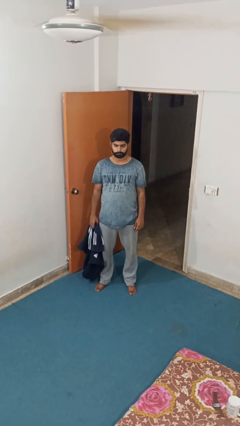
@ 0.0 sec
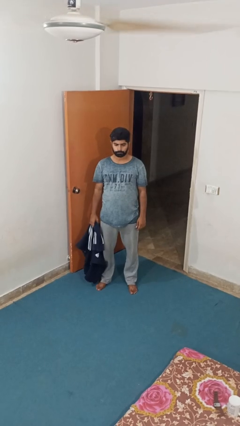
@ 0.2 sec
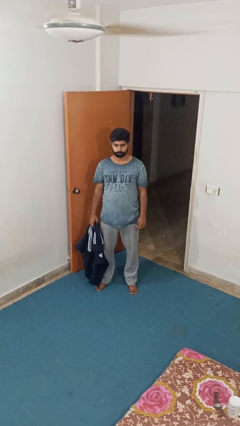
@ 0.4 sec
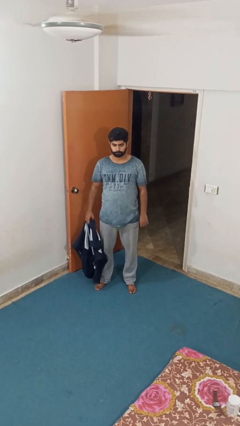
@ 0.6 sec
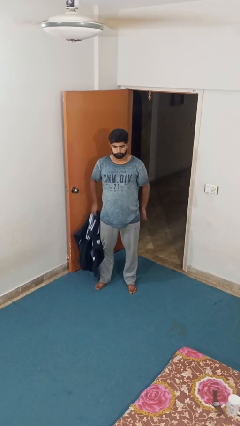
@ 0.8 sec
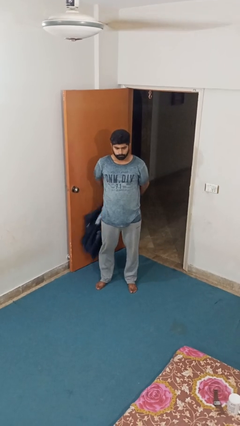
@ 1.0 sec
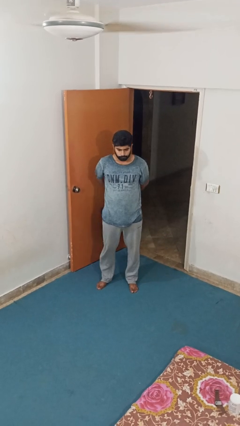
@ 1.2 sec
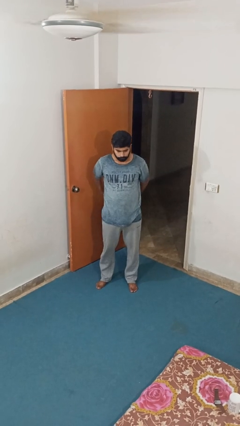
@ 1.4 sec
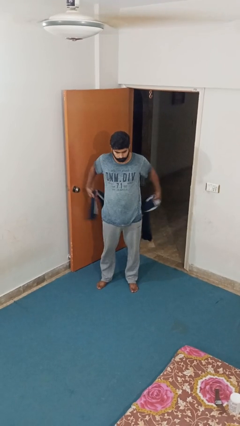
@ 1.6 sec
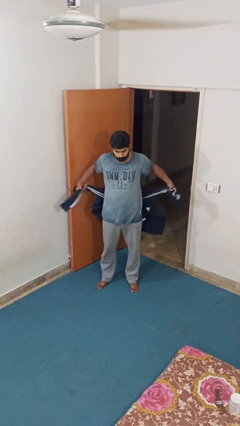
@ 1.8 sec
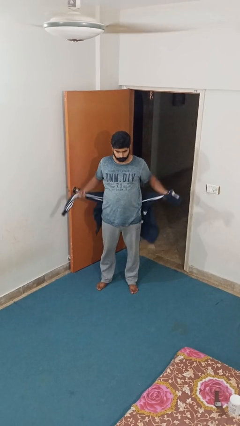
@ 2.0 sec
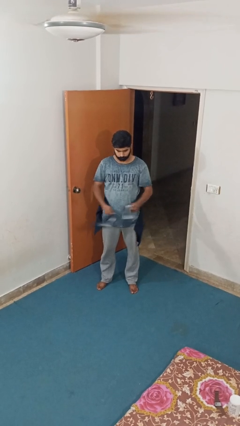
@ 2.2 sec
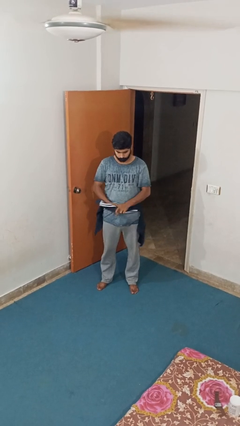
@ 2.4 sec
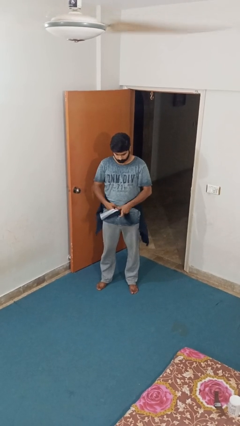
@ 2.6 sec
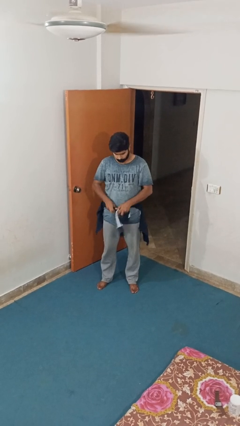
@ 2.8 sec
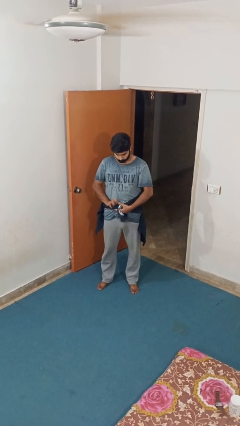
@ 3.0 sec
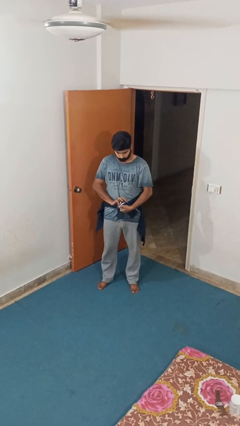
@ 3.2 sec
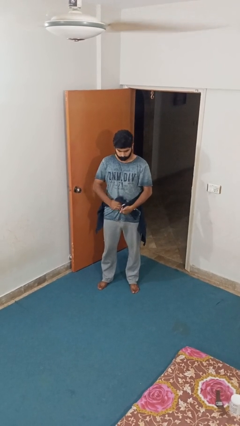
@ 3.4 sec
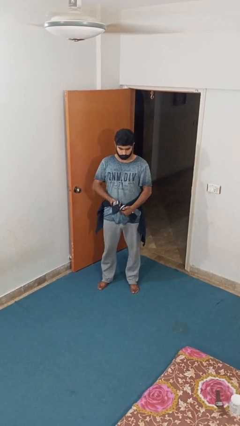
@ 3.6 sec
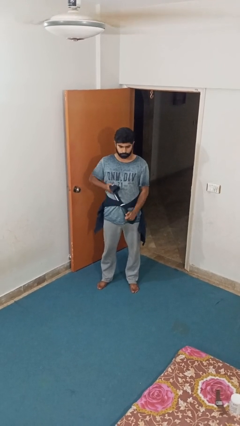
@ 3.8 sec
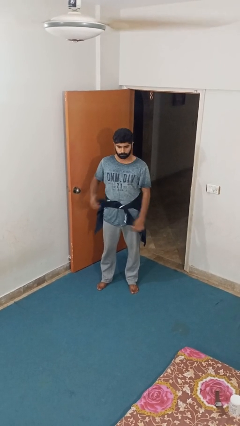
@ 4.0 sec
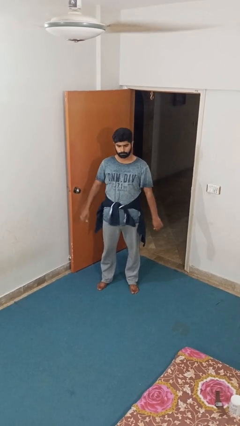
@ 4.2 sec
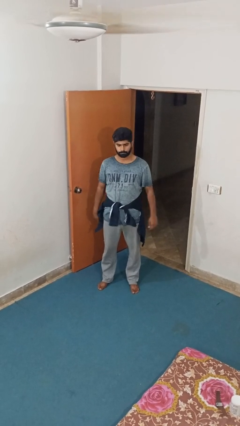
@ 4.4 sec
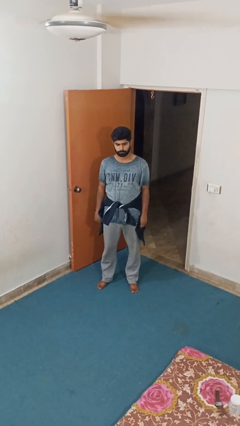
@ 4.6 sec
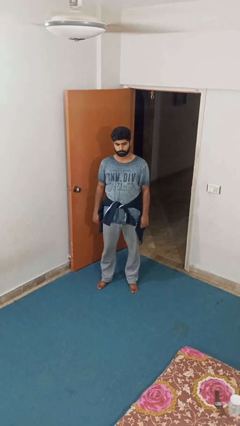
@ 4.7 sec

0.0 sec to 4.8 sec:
person ties jacket around waist

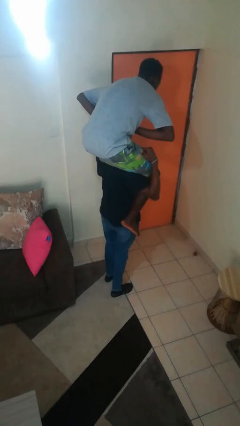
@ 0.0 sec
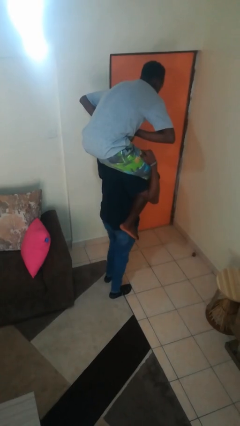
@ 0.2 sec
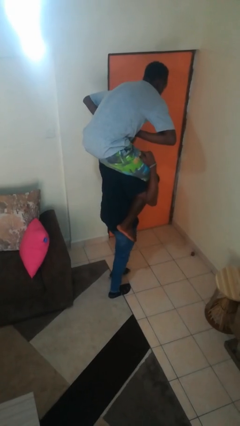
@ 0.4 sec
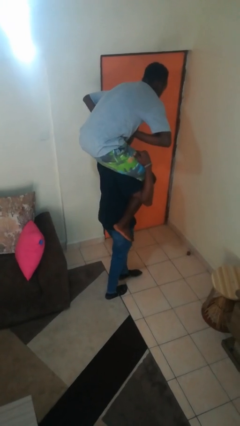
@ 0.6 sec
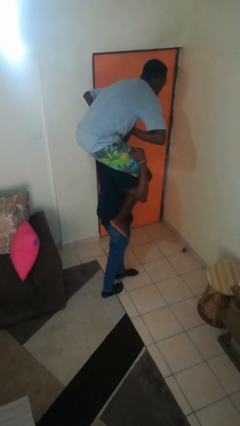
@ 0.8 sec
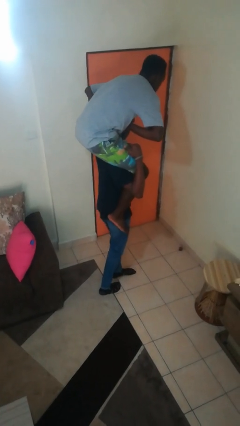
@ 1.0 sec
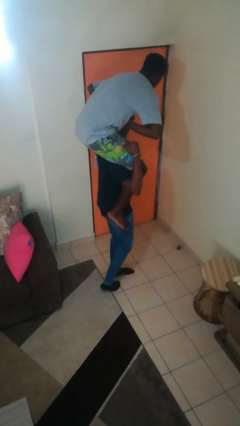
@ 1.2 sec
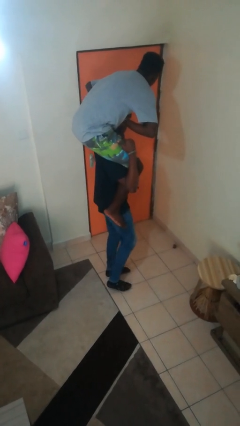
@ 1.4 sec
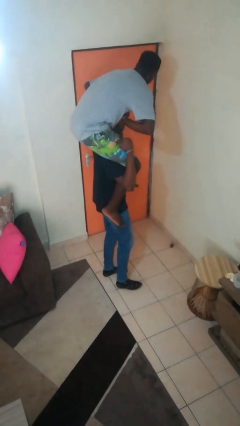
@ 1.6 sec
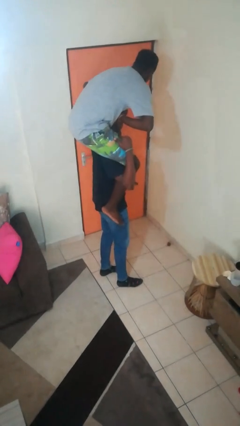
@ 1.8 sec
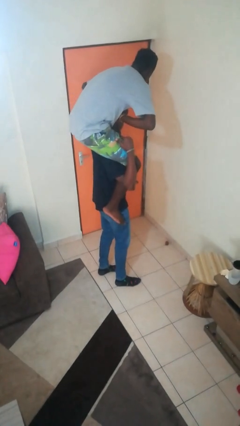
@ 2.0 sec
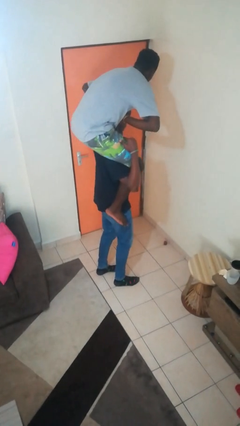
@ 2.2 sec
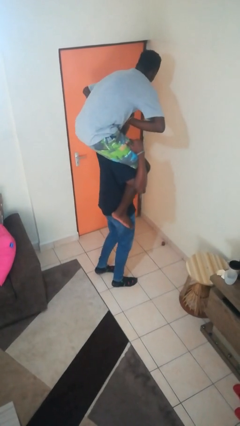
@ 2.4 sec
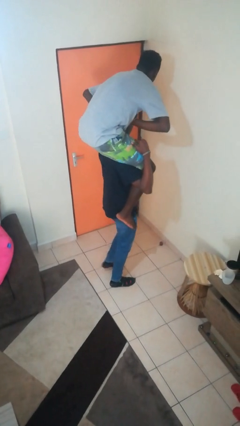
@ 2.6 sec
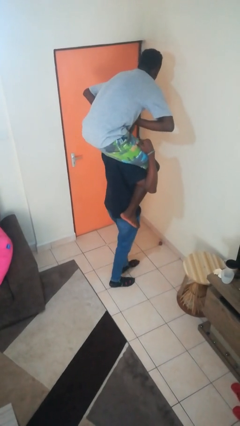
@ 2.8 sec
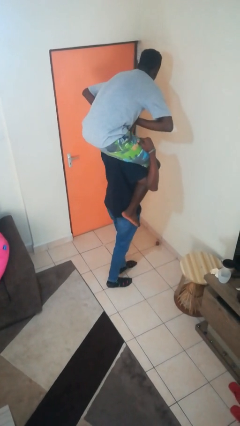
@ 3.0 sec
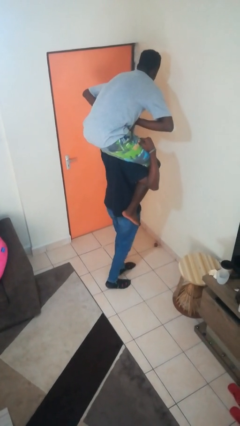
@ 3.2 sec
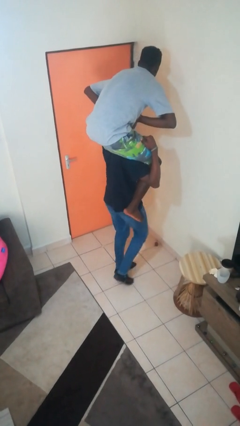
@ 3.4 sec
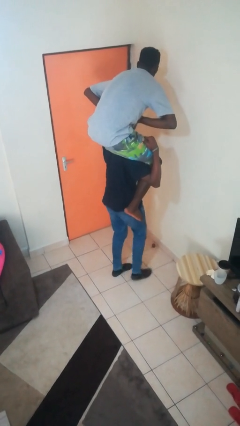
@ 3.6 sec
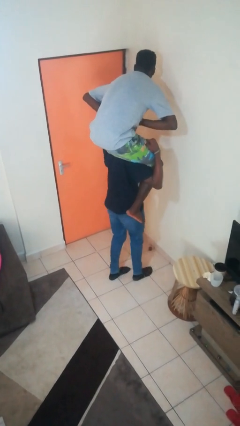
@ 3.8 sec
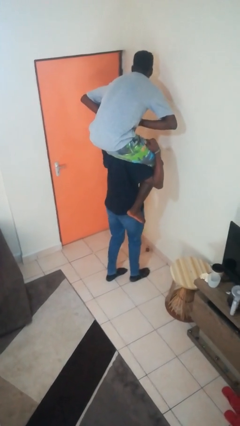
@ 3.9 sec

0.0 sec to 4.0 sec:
person carries person on shoulders

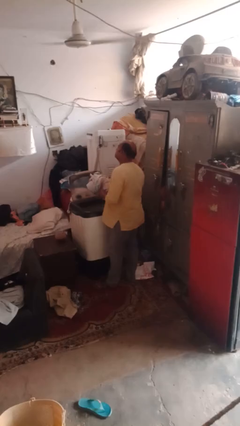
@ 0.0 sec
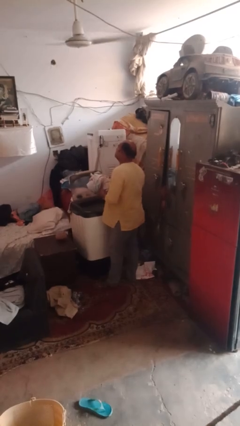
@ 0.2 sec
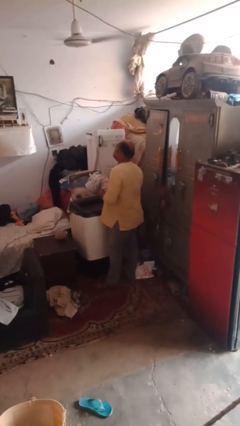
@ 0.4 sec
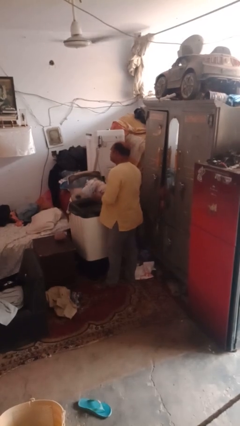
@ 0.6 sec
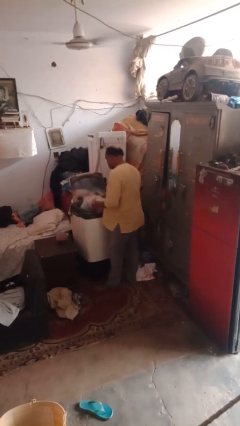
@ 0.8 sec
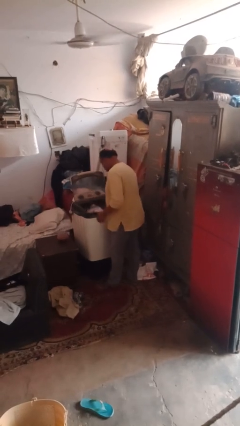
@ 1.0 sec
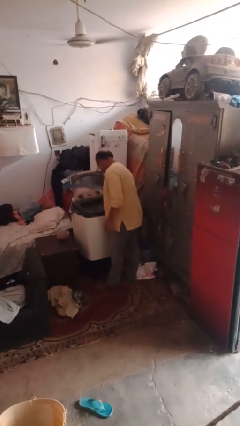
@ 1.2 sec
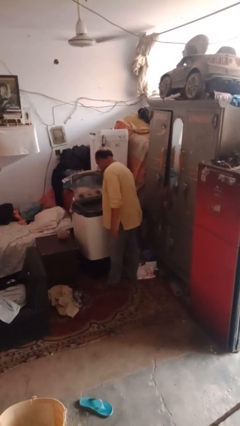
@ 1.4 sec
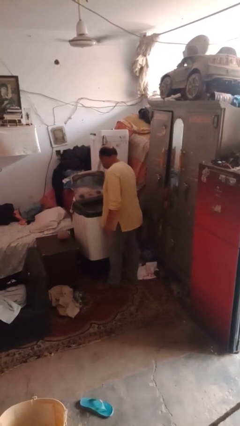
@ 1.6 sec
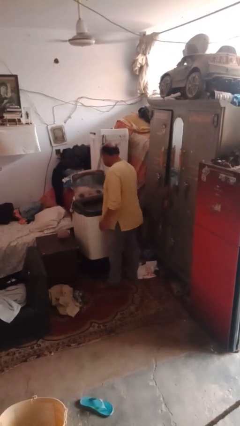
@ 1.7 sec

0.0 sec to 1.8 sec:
person loads clotheswasher

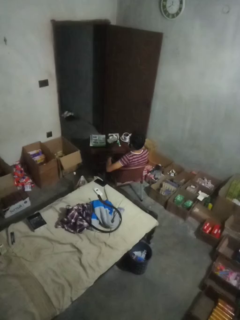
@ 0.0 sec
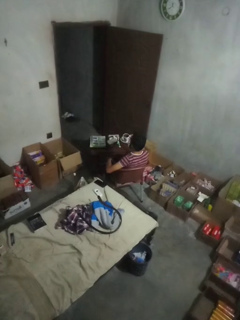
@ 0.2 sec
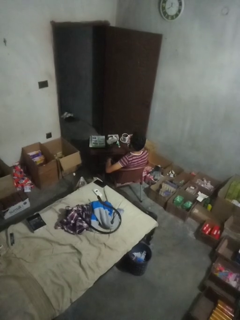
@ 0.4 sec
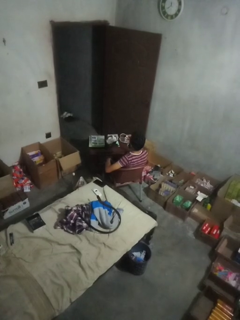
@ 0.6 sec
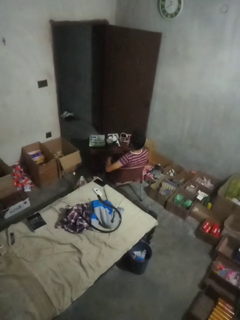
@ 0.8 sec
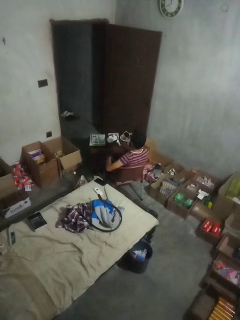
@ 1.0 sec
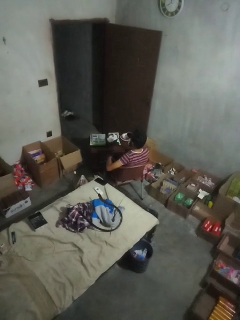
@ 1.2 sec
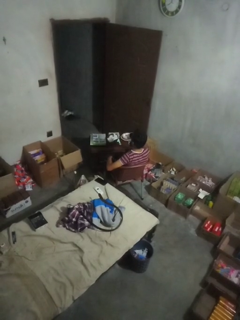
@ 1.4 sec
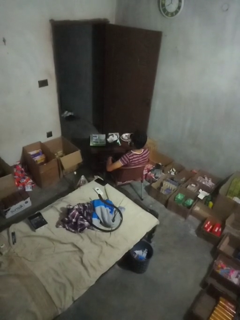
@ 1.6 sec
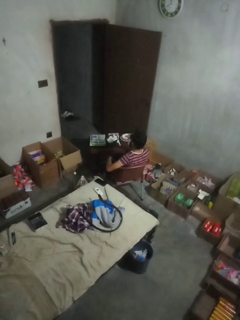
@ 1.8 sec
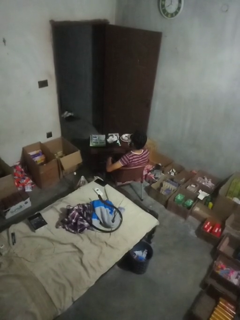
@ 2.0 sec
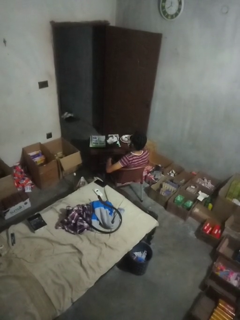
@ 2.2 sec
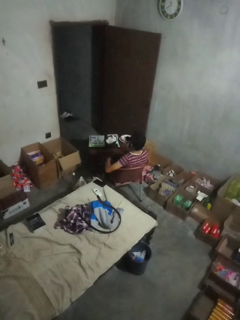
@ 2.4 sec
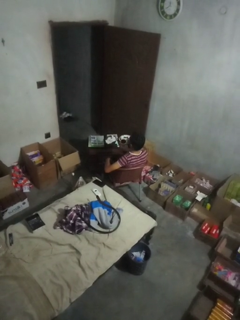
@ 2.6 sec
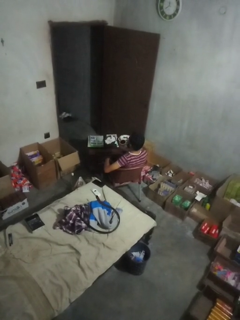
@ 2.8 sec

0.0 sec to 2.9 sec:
person drinks from mug

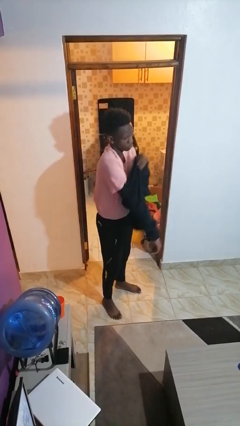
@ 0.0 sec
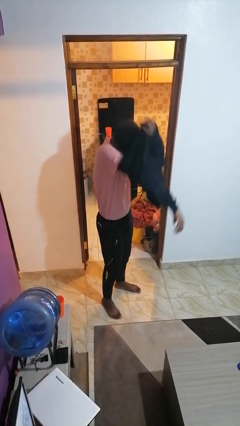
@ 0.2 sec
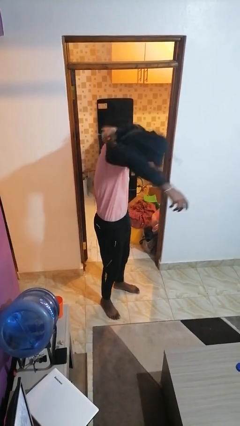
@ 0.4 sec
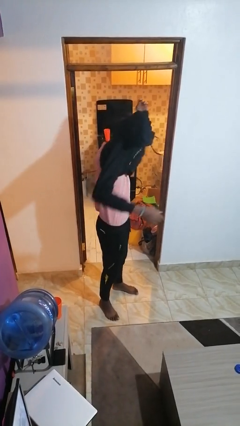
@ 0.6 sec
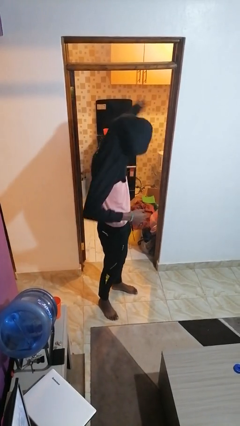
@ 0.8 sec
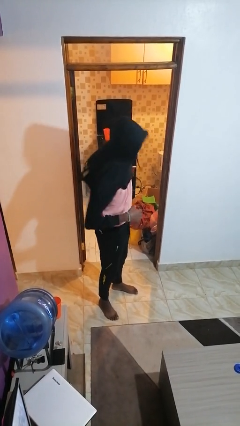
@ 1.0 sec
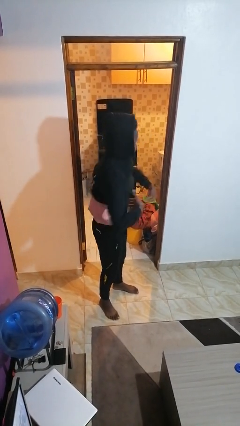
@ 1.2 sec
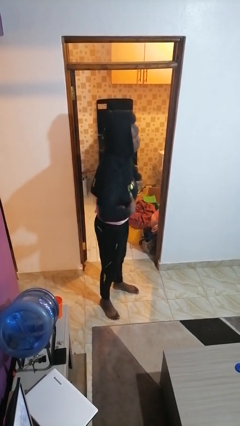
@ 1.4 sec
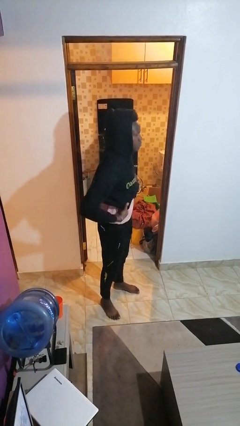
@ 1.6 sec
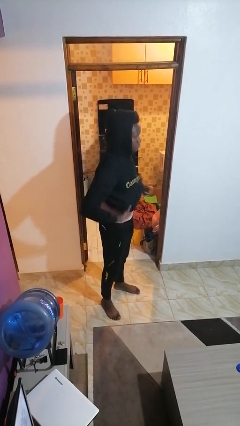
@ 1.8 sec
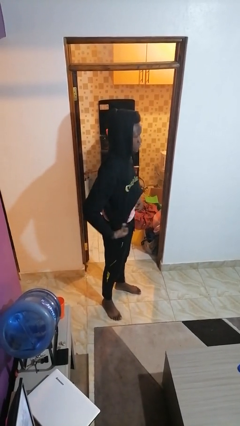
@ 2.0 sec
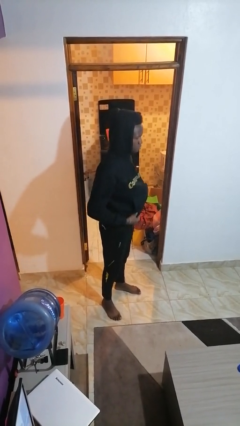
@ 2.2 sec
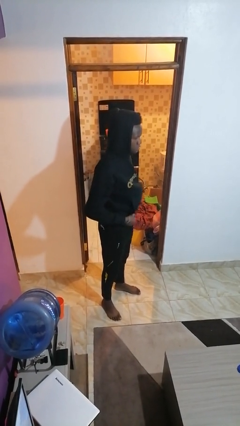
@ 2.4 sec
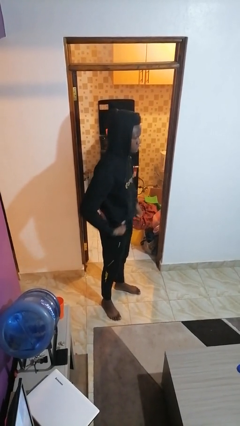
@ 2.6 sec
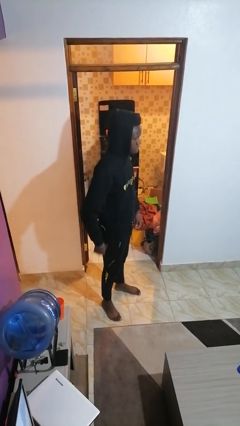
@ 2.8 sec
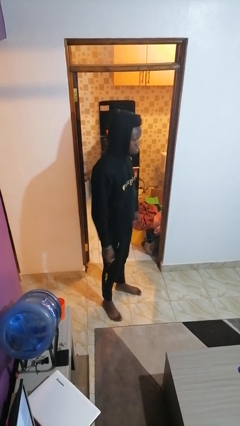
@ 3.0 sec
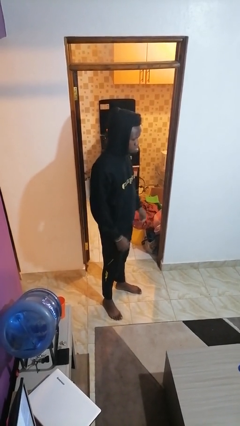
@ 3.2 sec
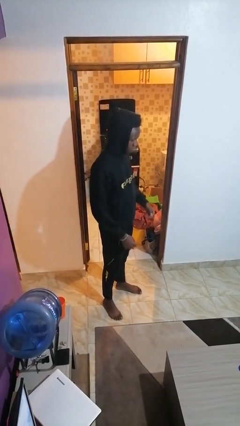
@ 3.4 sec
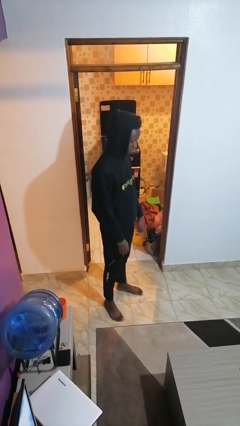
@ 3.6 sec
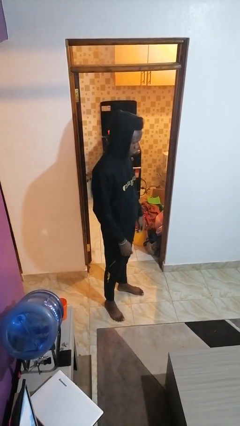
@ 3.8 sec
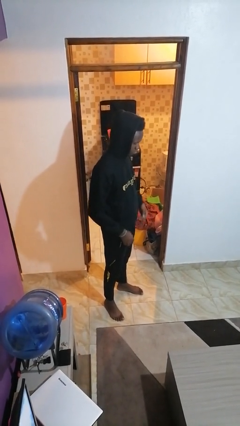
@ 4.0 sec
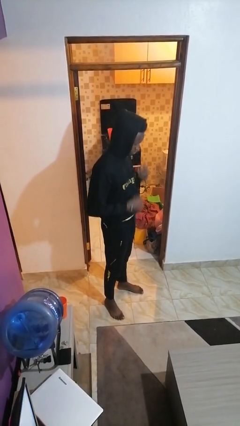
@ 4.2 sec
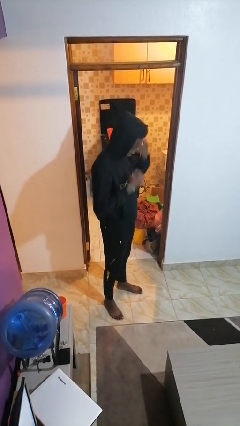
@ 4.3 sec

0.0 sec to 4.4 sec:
person puts on hoodie

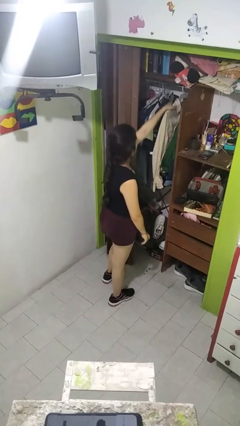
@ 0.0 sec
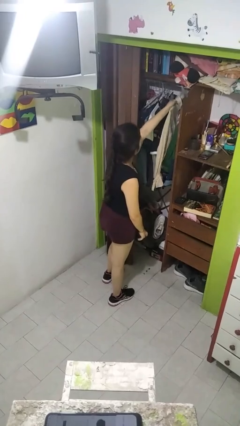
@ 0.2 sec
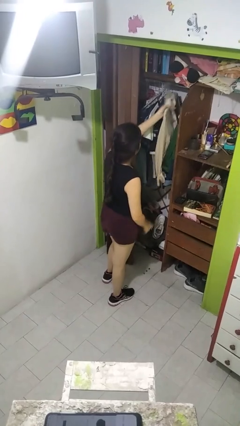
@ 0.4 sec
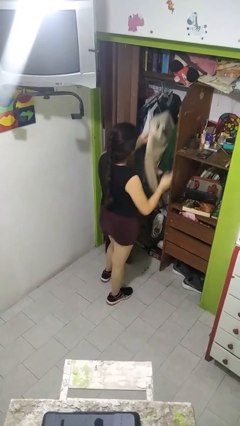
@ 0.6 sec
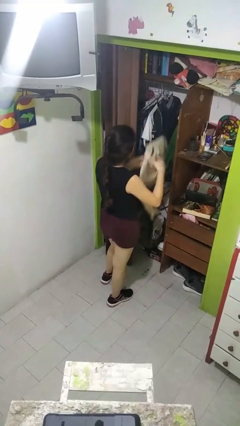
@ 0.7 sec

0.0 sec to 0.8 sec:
person takes clothes from closet
